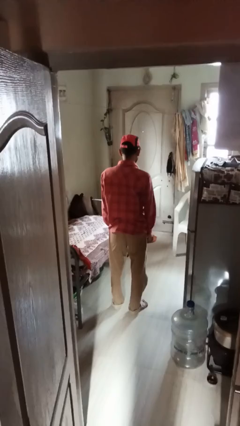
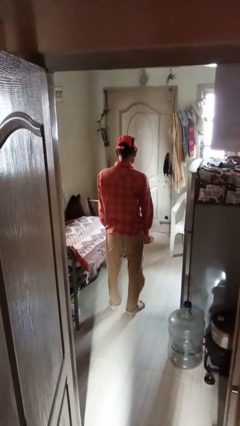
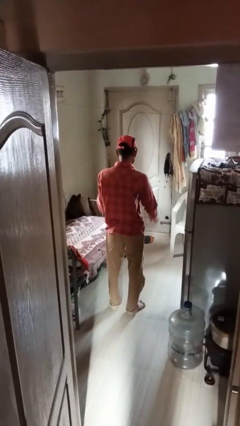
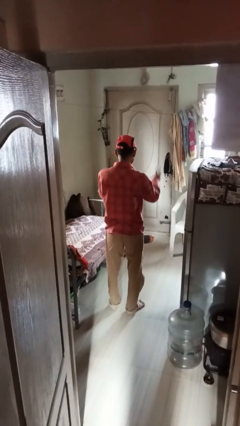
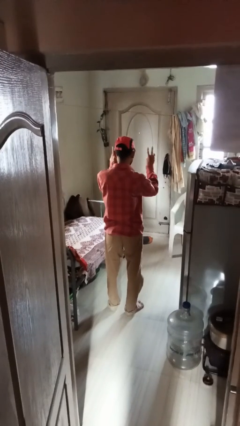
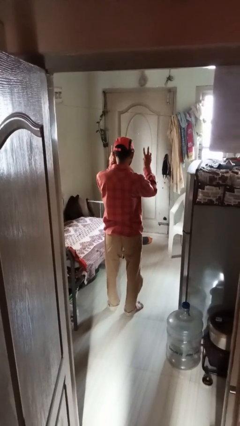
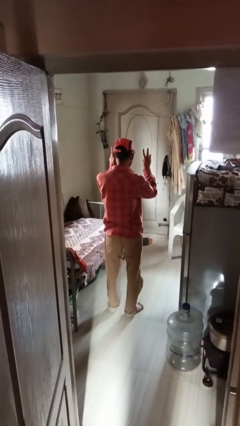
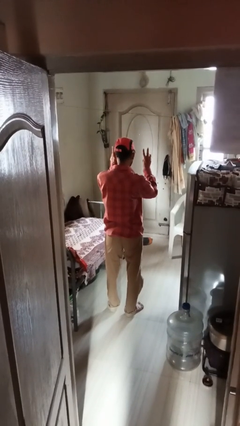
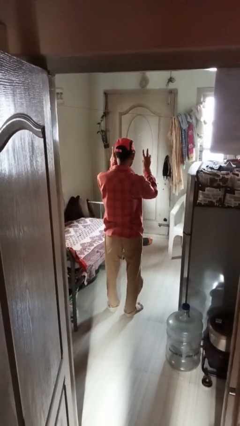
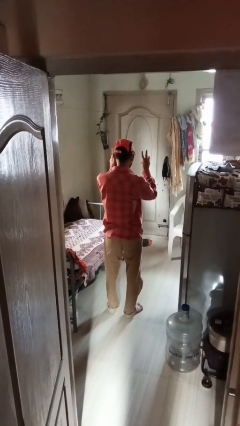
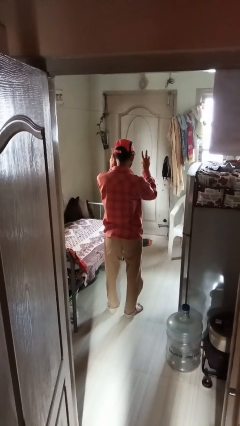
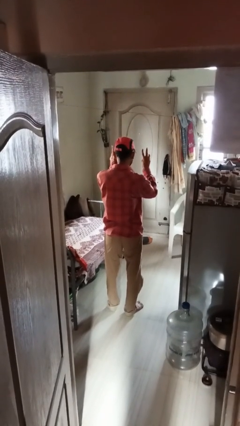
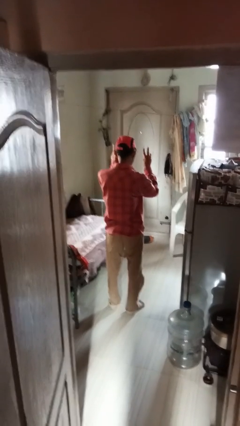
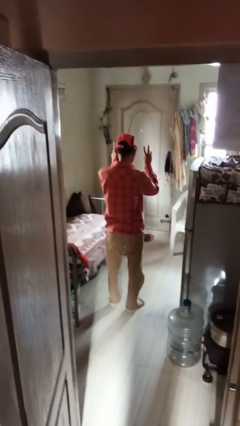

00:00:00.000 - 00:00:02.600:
person gestures peace

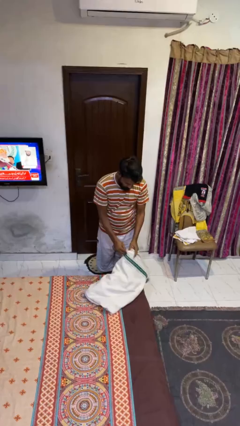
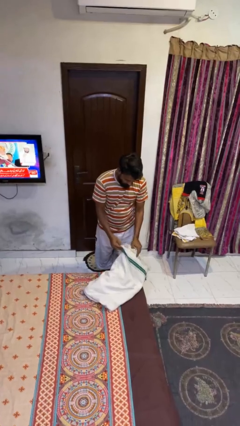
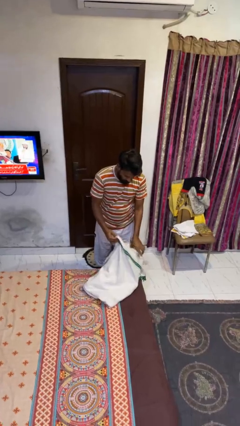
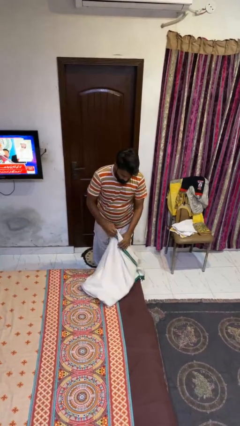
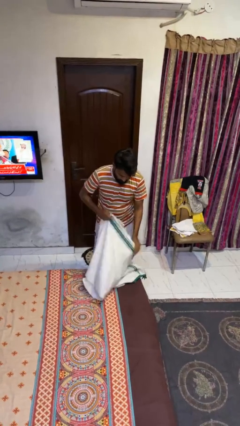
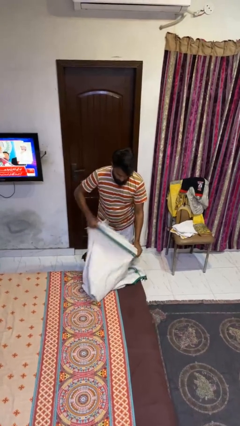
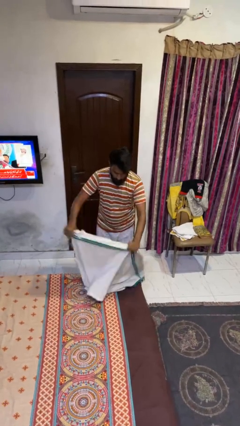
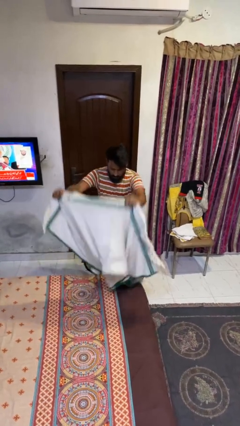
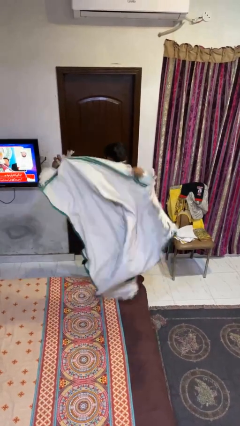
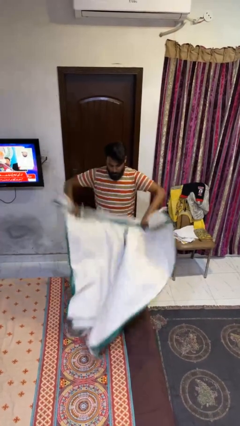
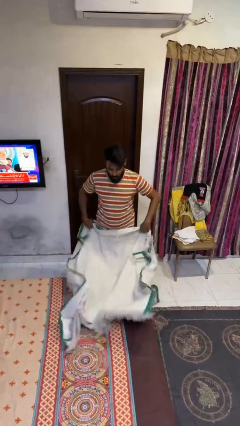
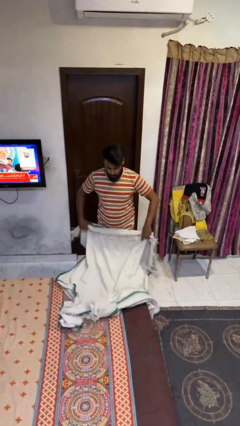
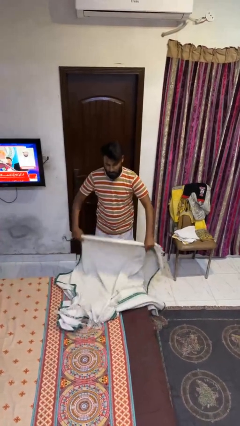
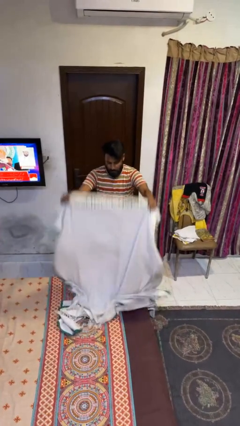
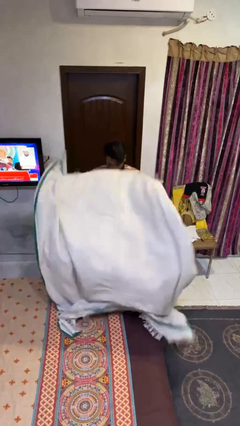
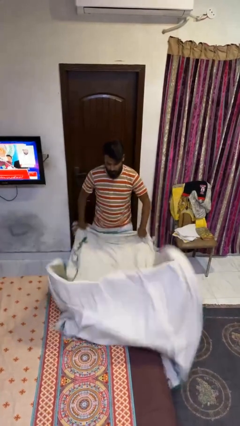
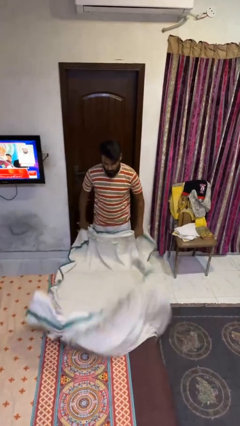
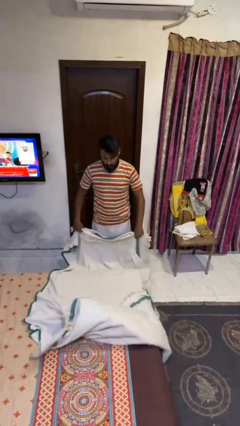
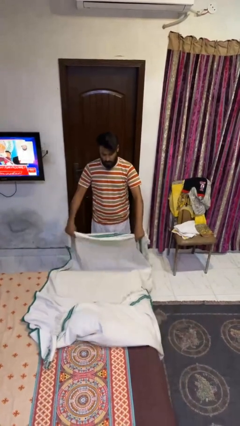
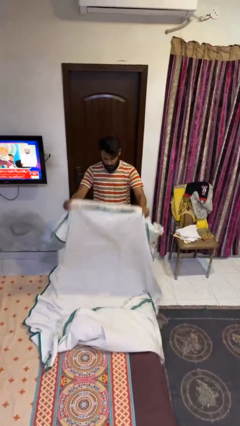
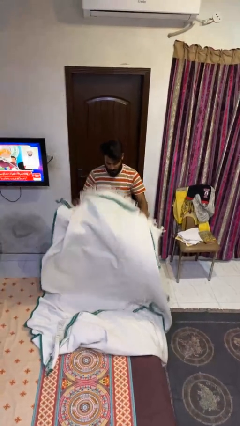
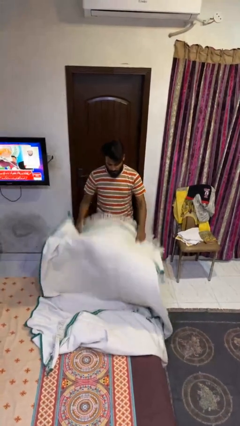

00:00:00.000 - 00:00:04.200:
person unfolds blanket

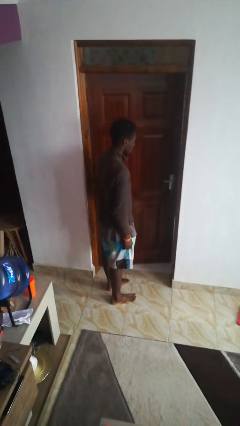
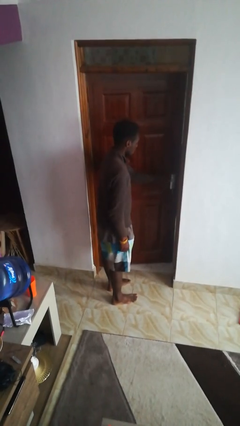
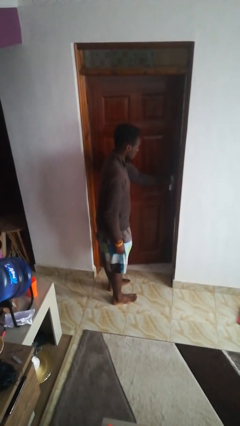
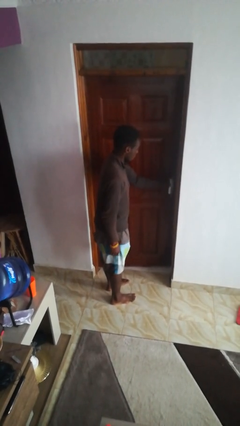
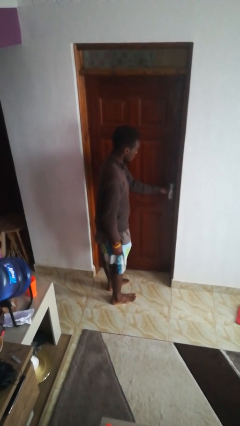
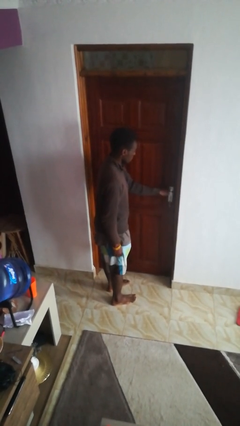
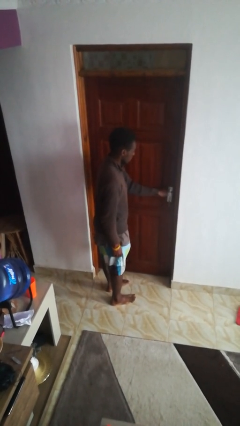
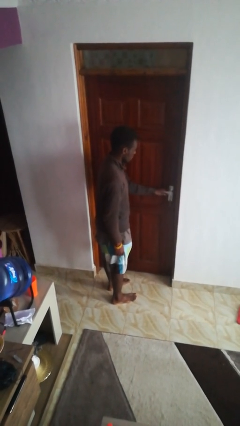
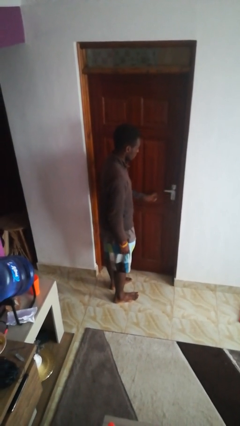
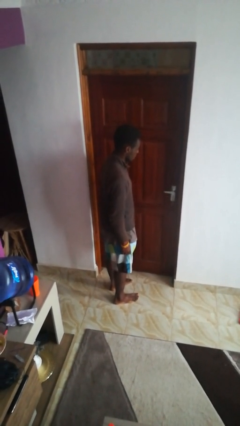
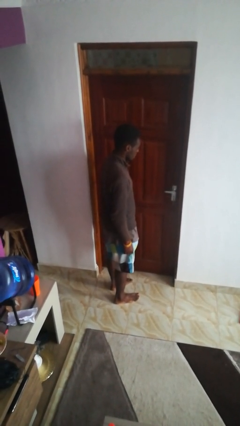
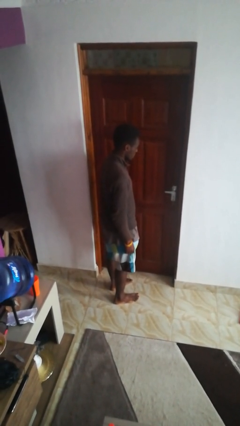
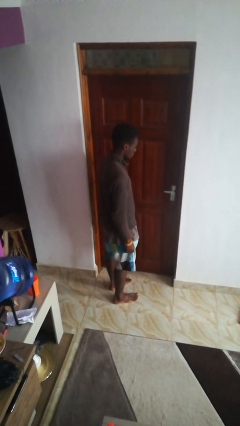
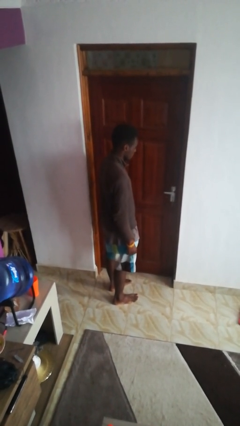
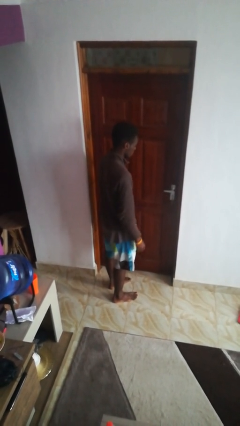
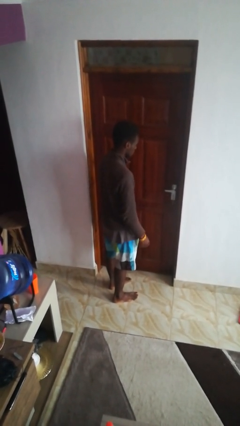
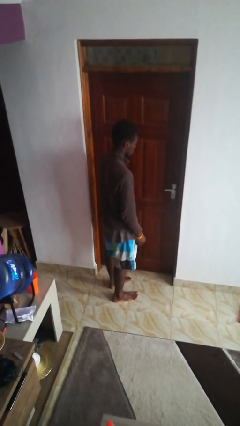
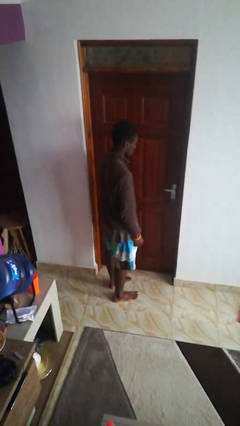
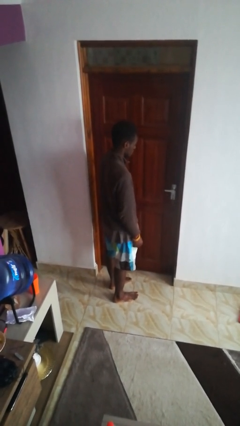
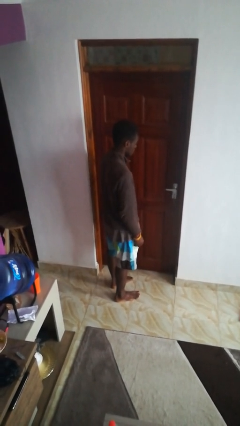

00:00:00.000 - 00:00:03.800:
person closes facility door

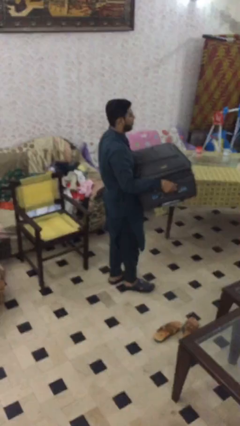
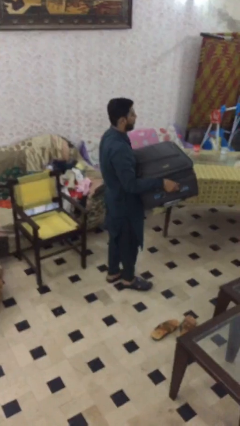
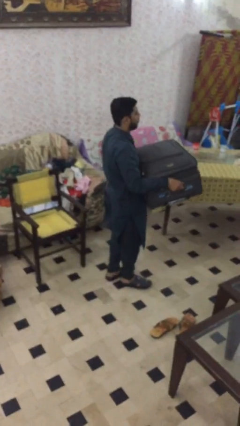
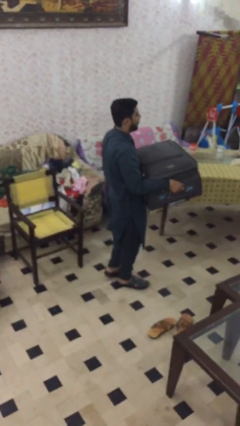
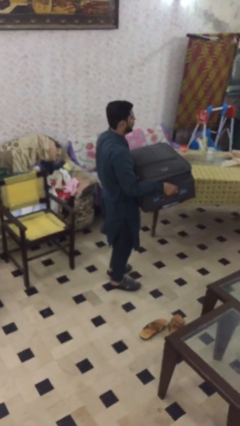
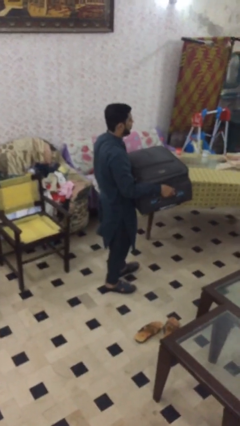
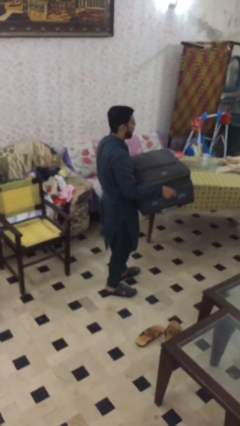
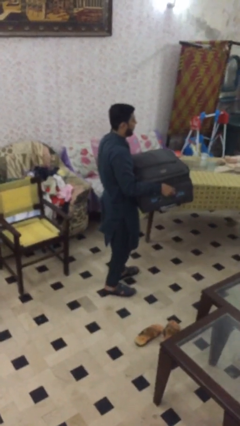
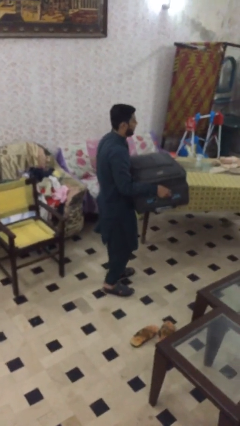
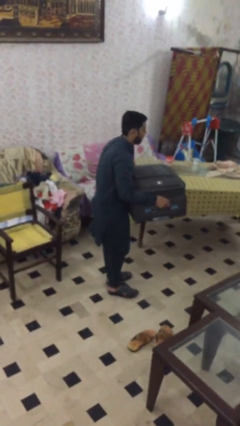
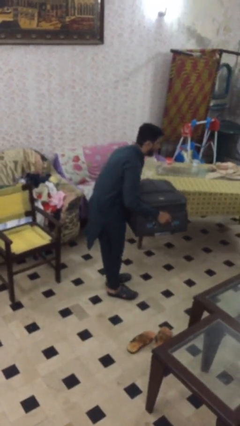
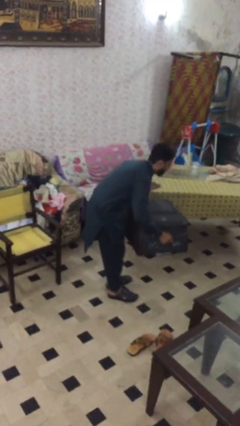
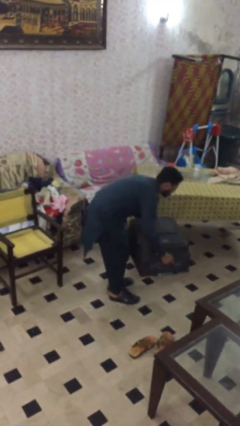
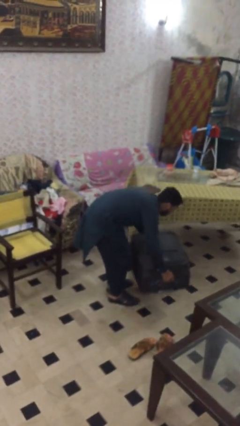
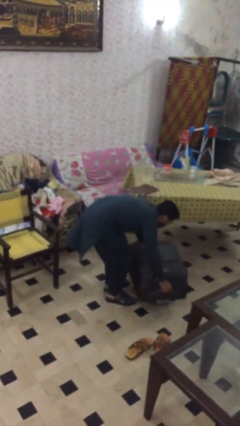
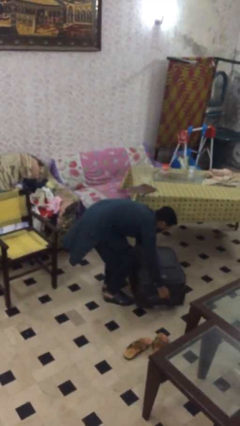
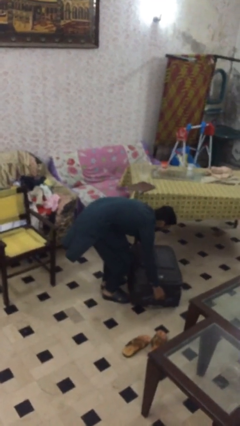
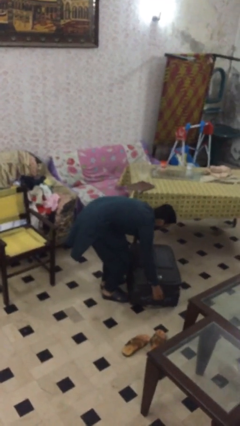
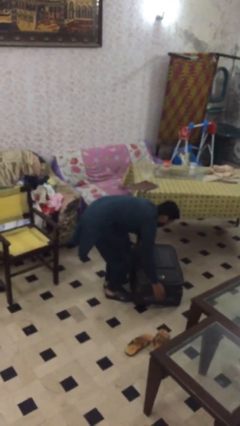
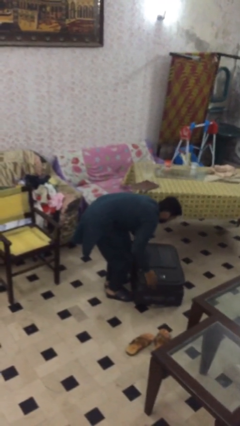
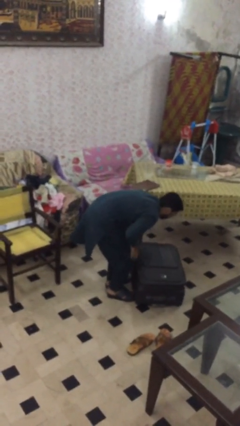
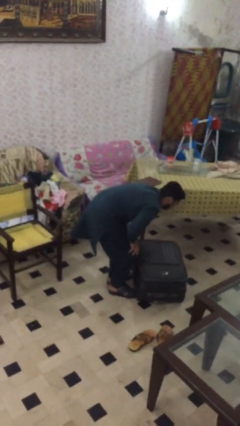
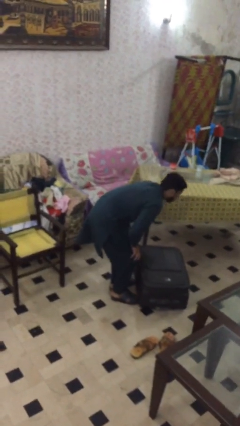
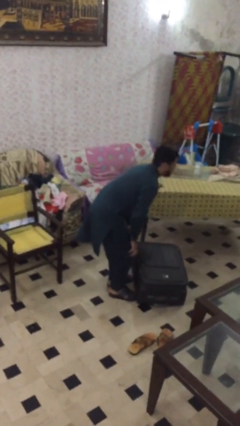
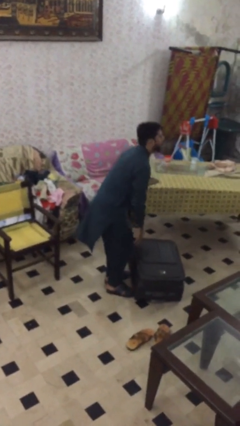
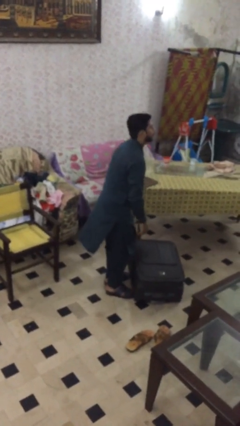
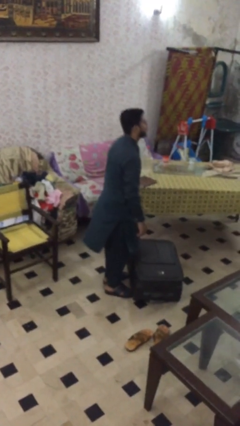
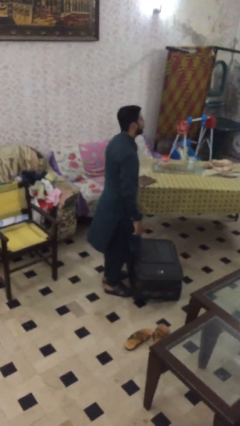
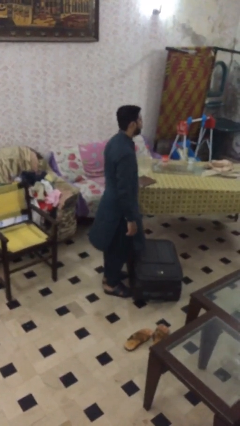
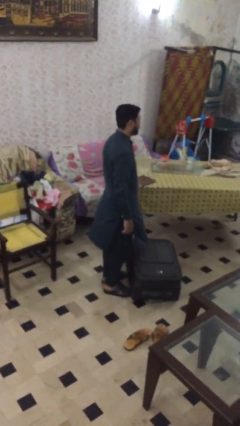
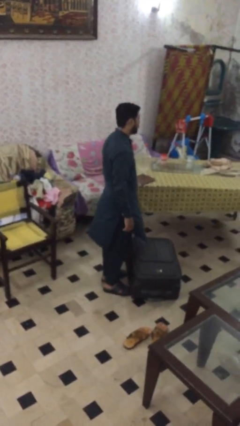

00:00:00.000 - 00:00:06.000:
person puts down object on floor

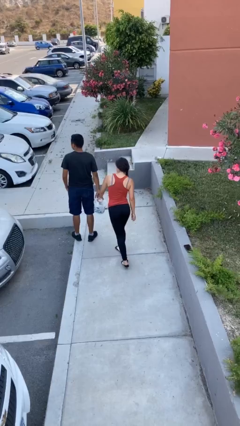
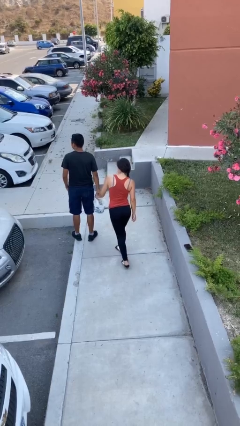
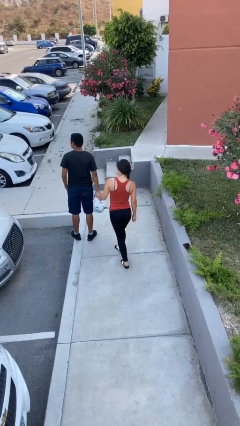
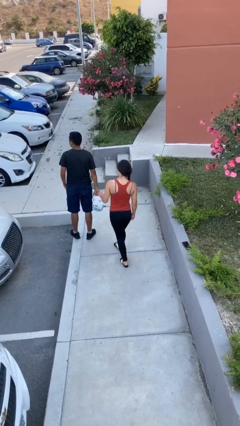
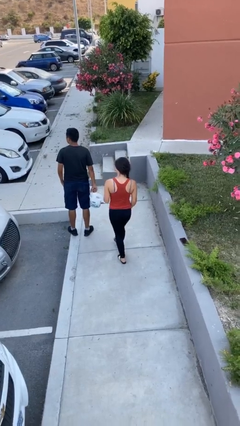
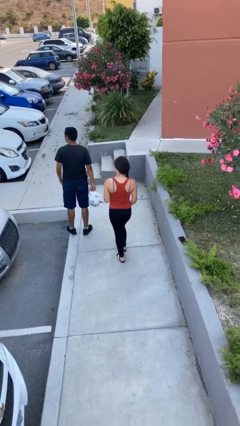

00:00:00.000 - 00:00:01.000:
person steals object from person
